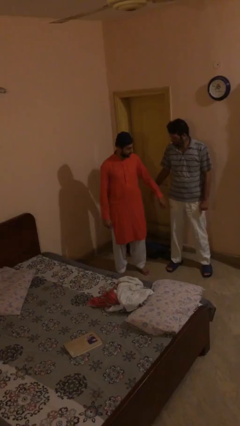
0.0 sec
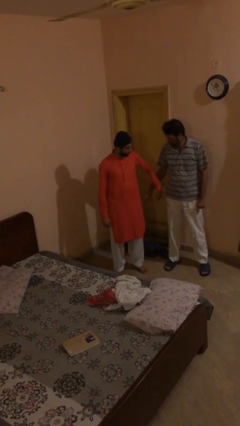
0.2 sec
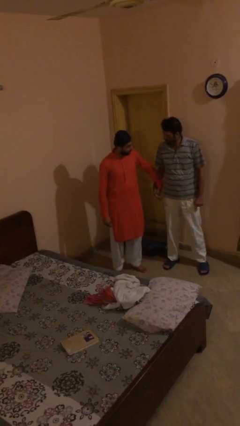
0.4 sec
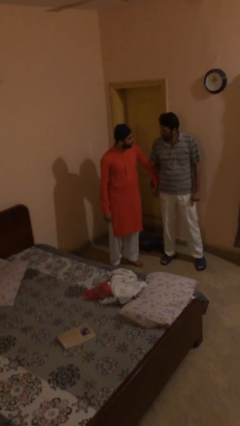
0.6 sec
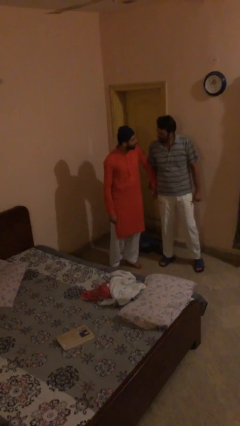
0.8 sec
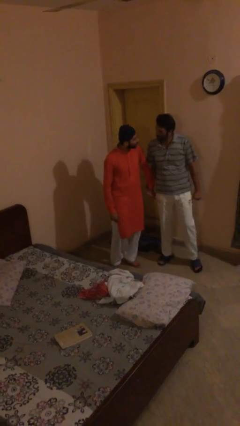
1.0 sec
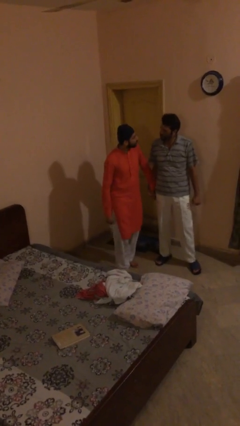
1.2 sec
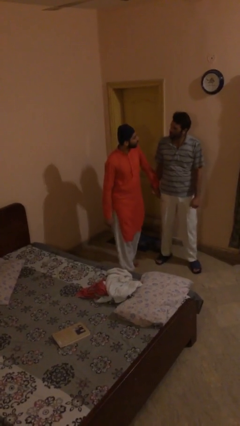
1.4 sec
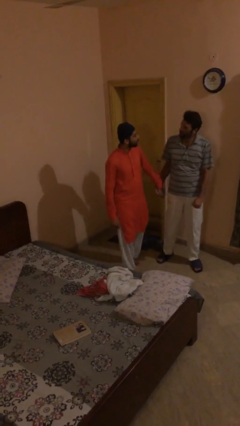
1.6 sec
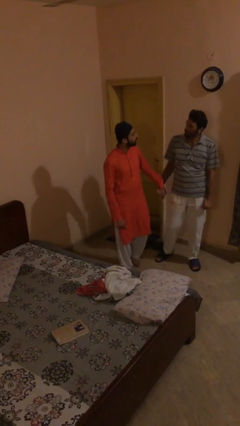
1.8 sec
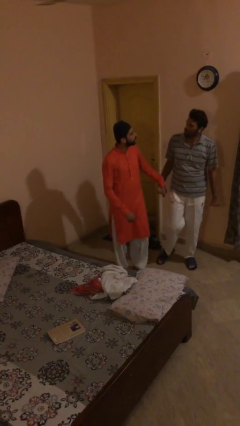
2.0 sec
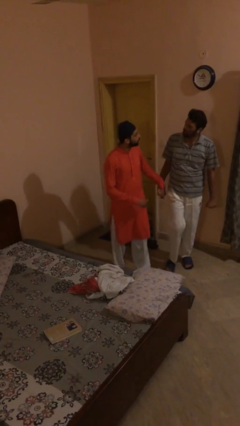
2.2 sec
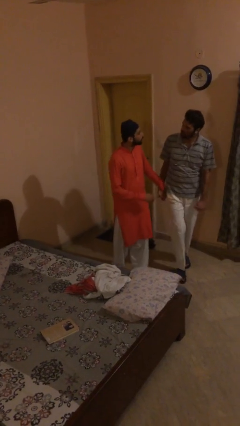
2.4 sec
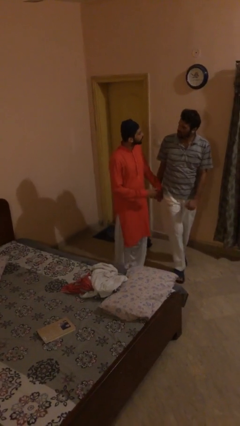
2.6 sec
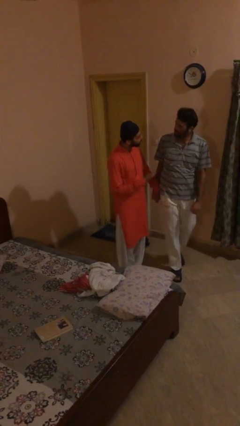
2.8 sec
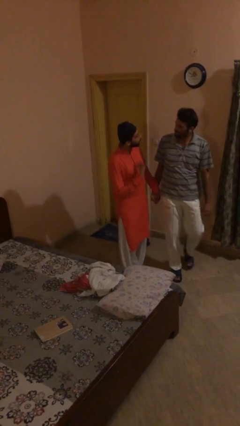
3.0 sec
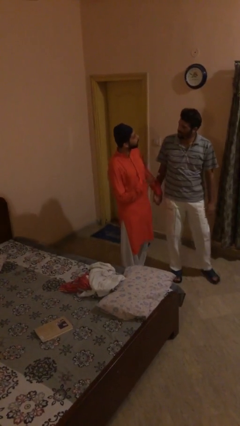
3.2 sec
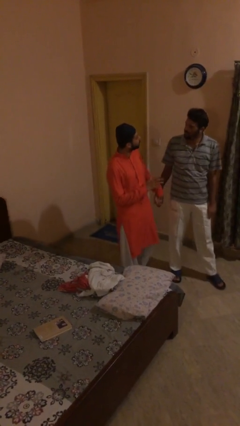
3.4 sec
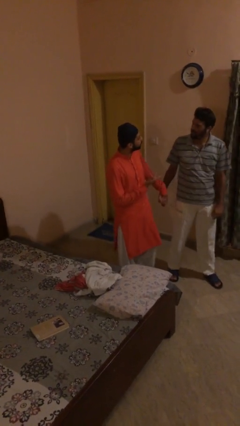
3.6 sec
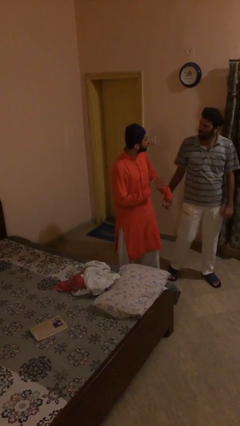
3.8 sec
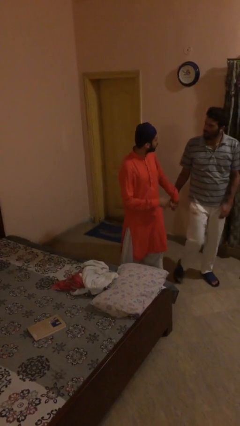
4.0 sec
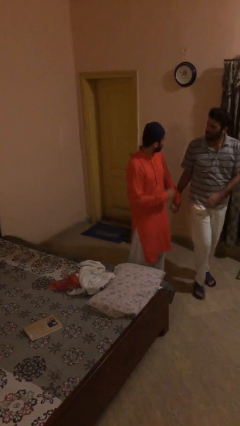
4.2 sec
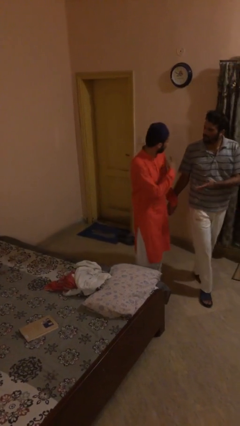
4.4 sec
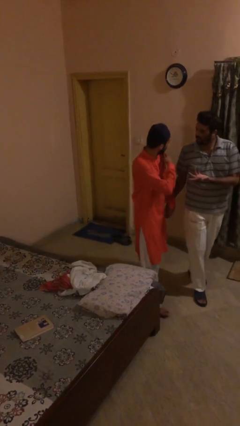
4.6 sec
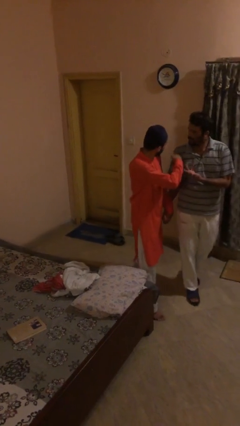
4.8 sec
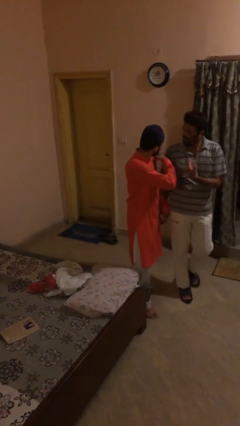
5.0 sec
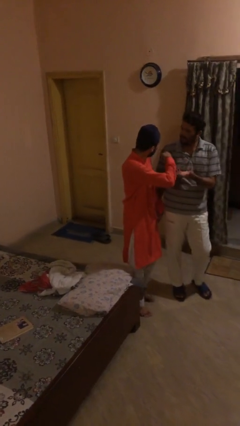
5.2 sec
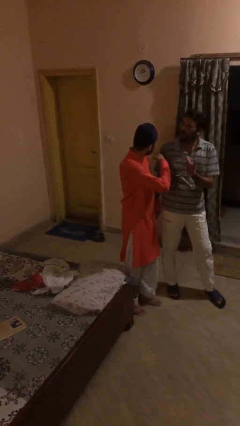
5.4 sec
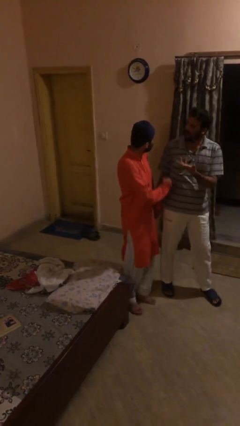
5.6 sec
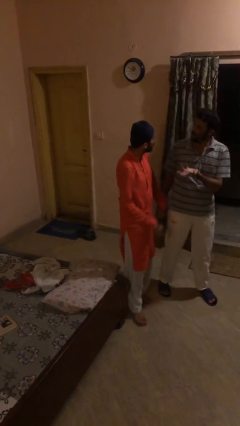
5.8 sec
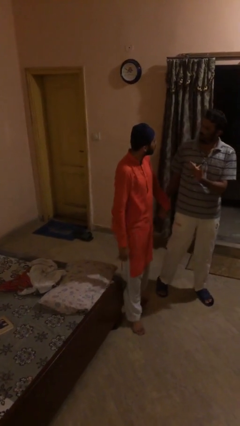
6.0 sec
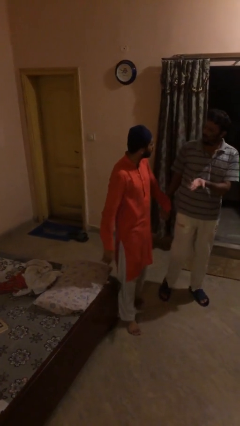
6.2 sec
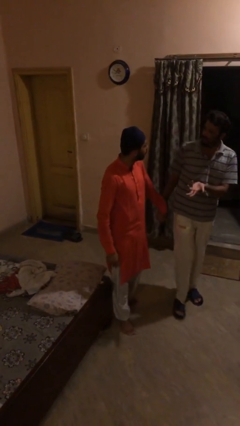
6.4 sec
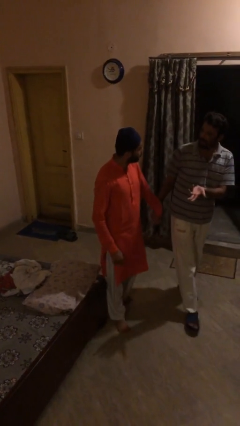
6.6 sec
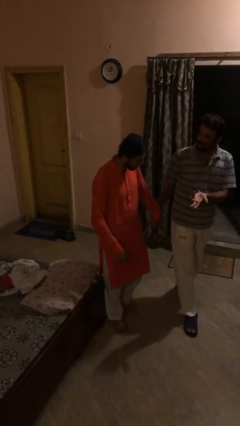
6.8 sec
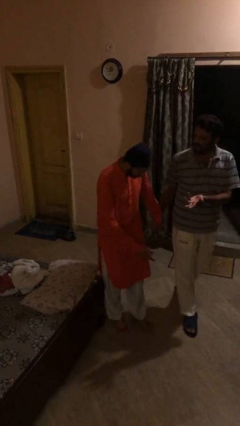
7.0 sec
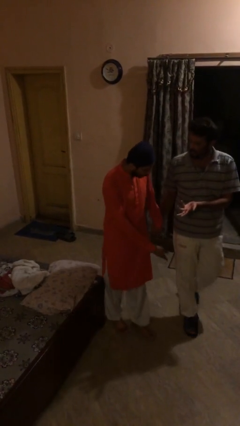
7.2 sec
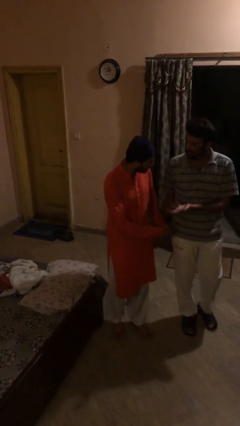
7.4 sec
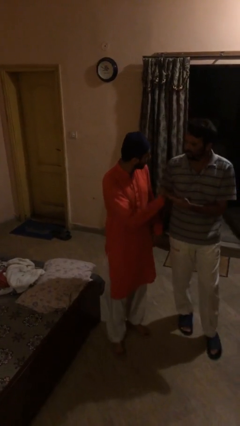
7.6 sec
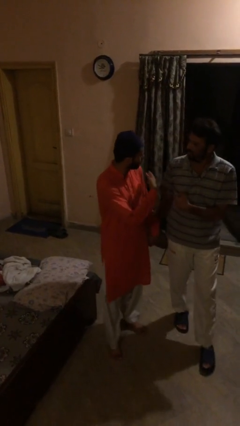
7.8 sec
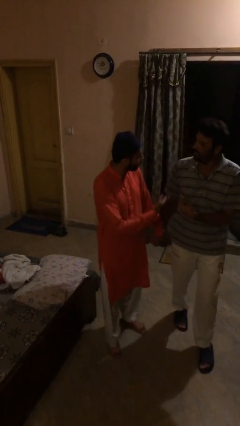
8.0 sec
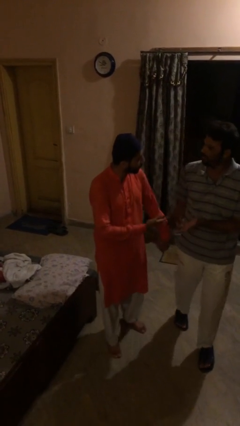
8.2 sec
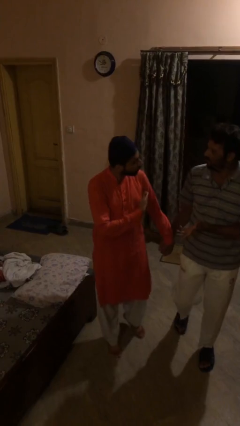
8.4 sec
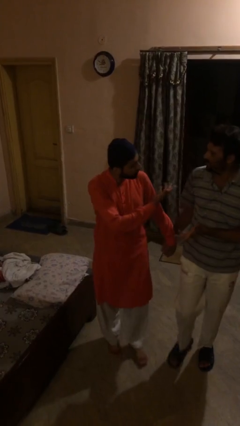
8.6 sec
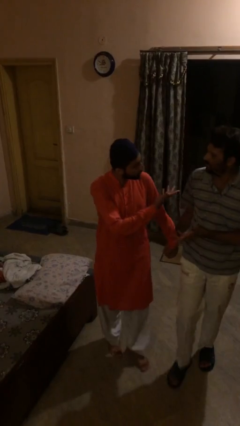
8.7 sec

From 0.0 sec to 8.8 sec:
person holds hand

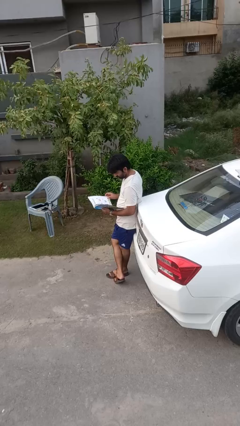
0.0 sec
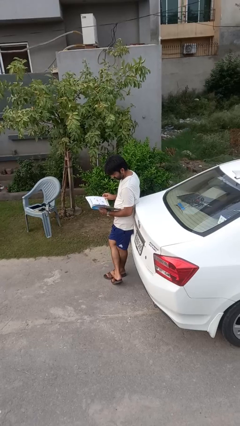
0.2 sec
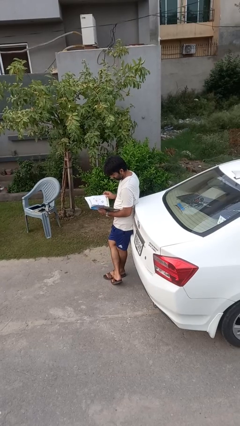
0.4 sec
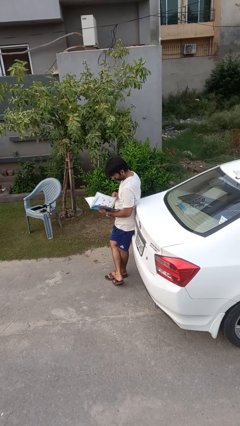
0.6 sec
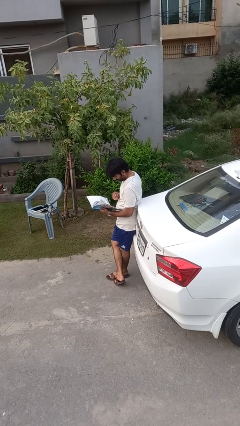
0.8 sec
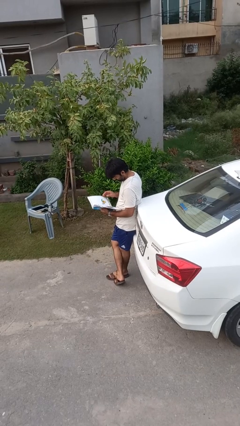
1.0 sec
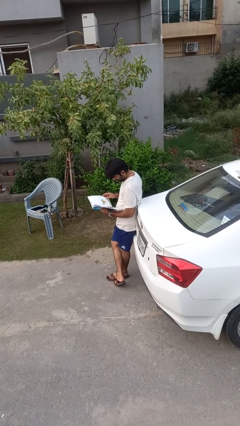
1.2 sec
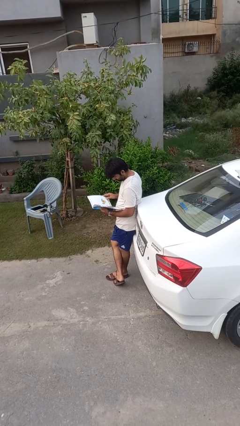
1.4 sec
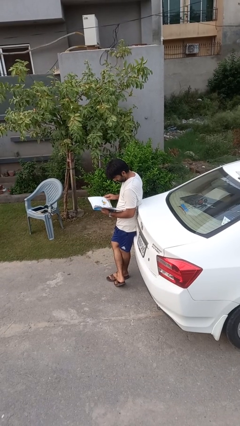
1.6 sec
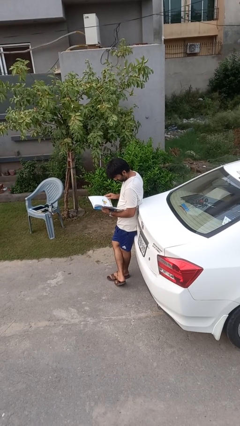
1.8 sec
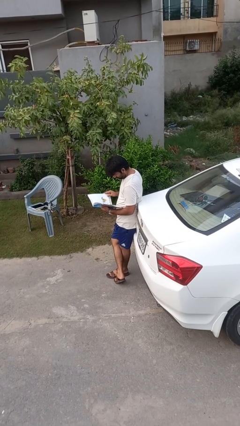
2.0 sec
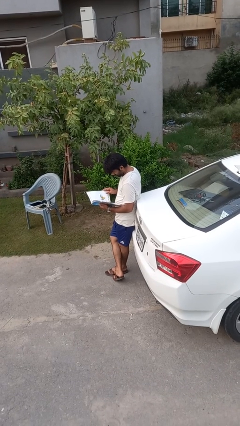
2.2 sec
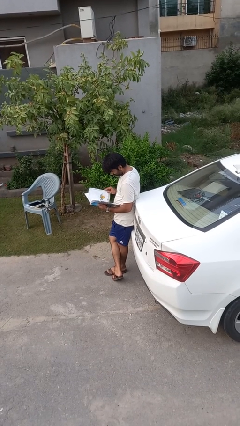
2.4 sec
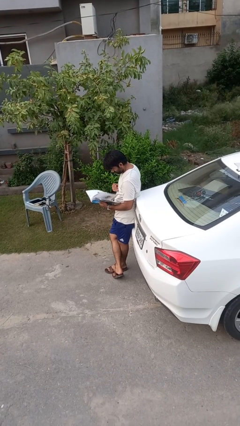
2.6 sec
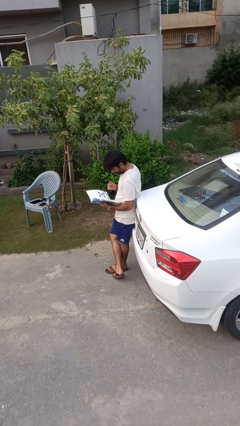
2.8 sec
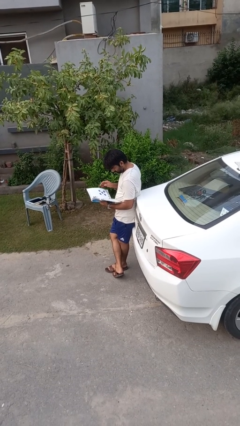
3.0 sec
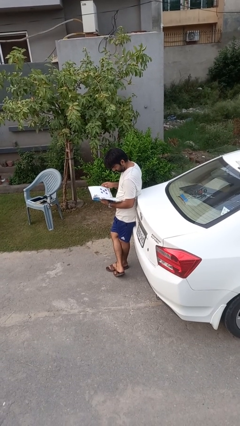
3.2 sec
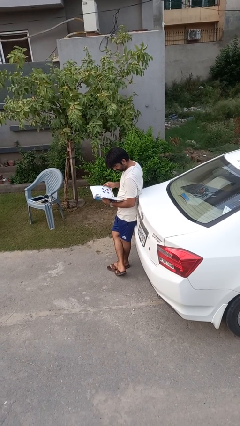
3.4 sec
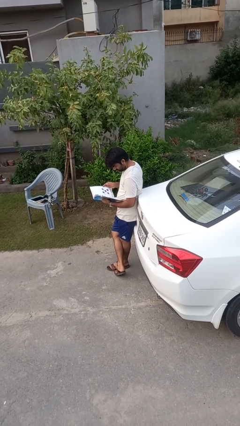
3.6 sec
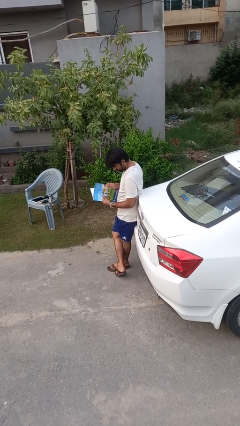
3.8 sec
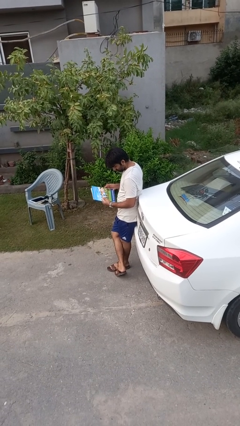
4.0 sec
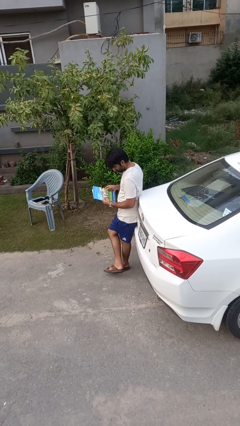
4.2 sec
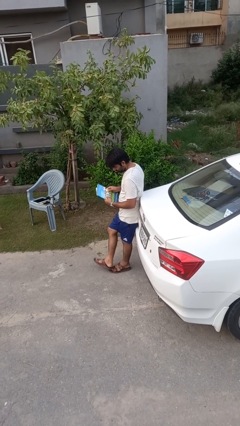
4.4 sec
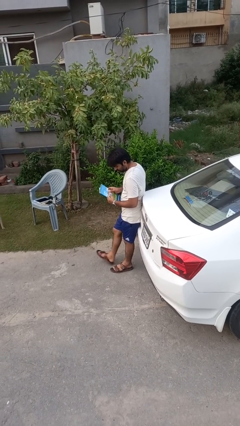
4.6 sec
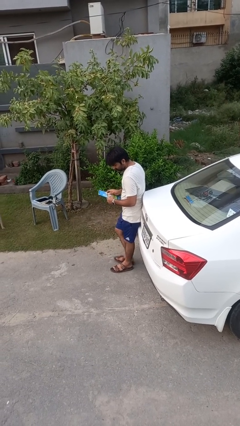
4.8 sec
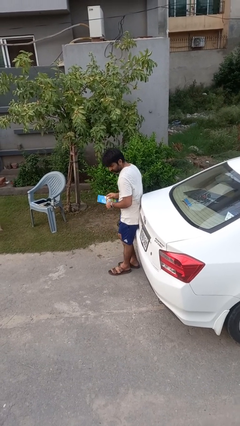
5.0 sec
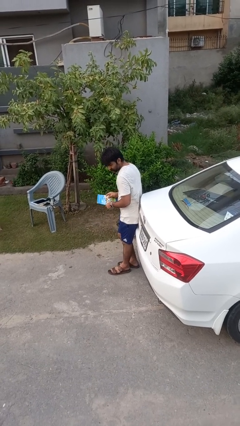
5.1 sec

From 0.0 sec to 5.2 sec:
person reads book

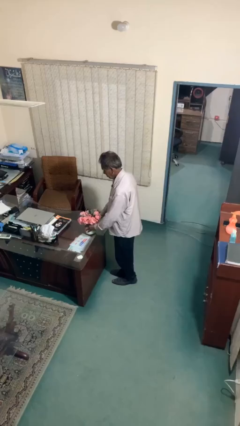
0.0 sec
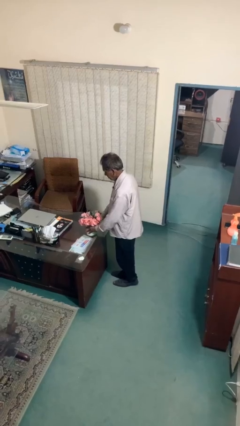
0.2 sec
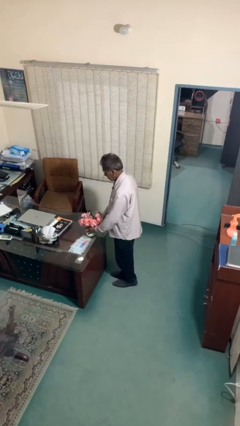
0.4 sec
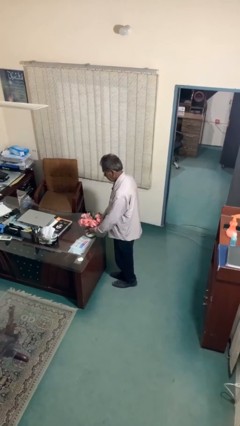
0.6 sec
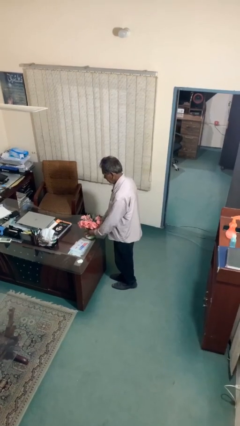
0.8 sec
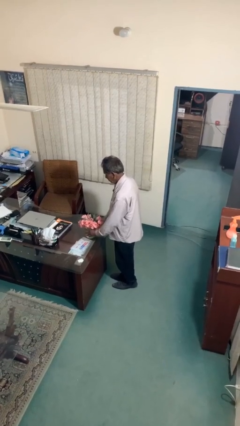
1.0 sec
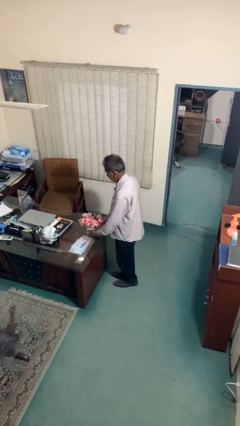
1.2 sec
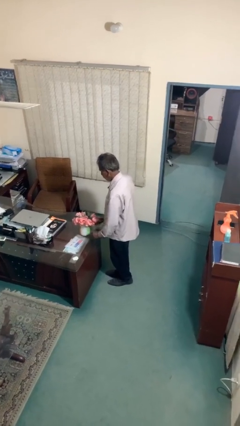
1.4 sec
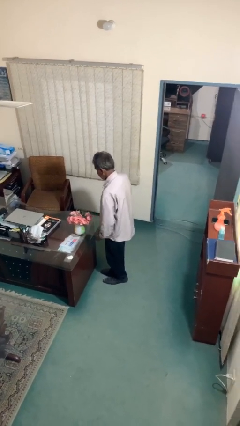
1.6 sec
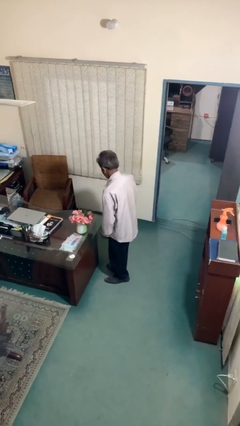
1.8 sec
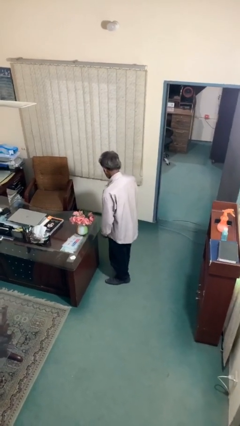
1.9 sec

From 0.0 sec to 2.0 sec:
person puts down object on table

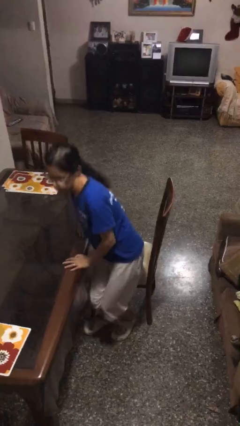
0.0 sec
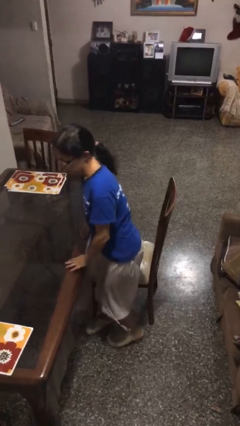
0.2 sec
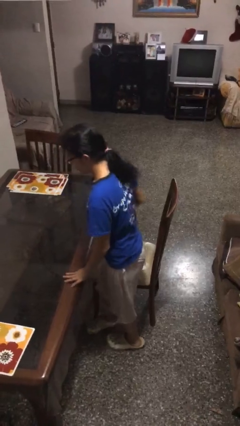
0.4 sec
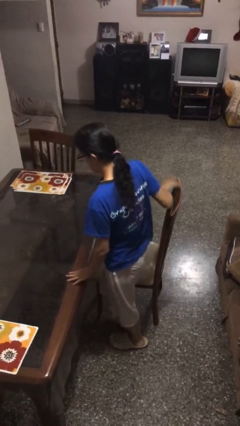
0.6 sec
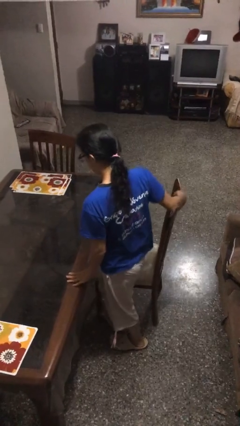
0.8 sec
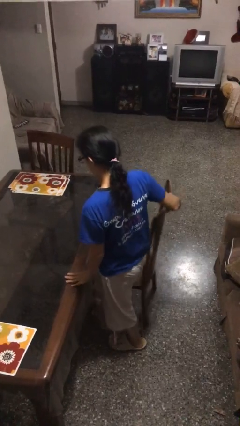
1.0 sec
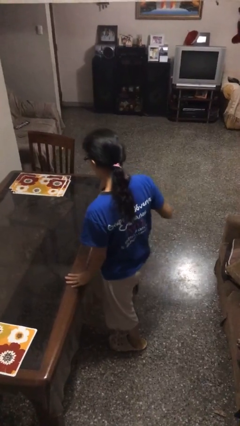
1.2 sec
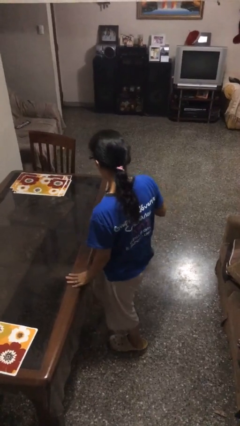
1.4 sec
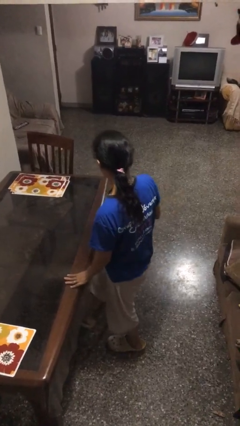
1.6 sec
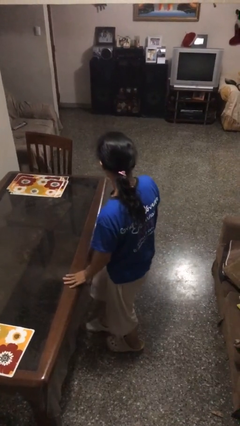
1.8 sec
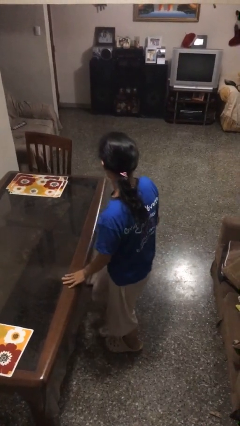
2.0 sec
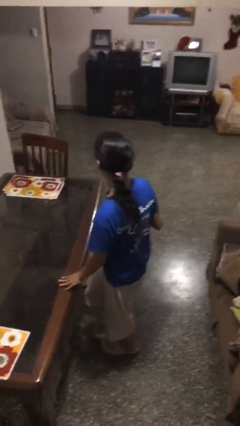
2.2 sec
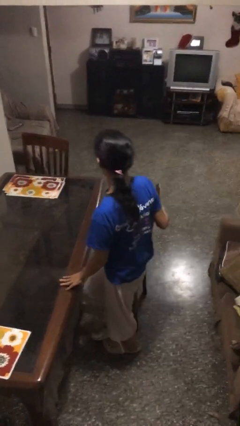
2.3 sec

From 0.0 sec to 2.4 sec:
person stands up
